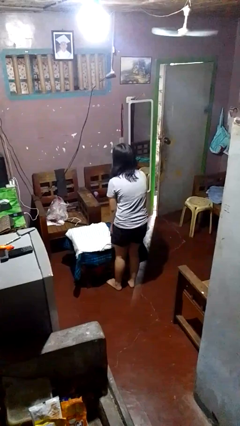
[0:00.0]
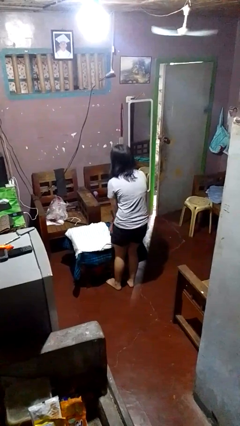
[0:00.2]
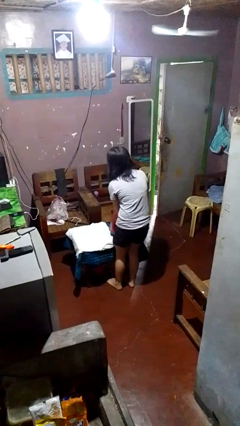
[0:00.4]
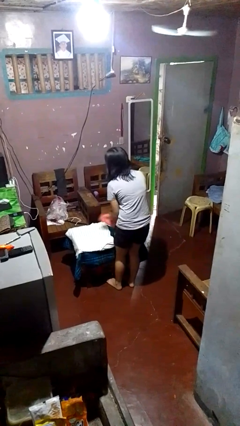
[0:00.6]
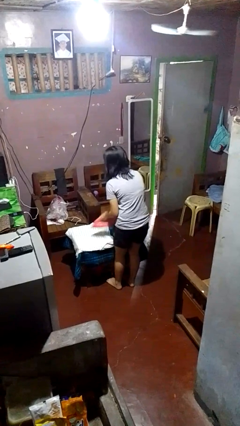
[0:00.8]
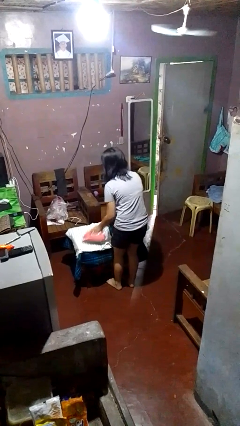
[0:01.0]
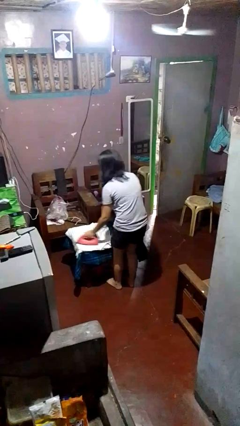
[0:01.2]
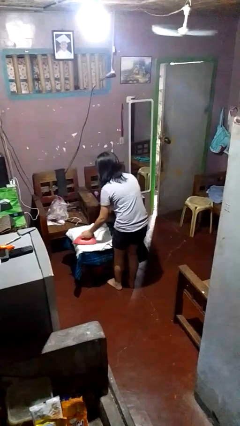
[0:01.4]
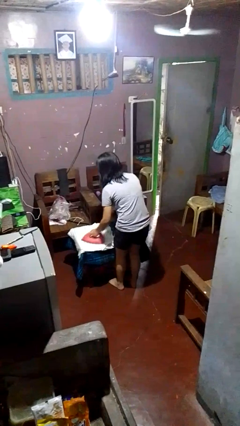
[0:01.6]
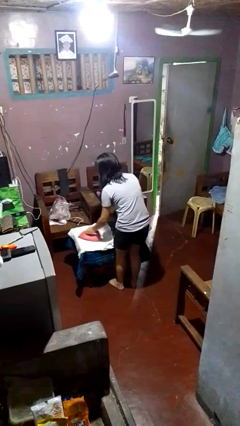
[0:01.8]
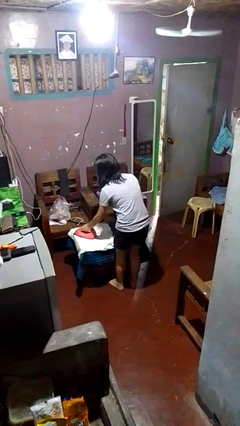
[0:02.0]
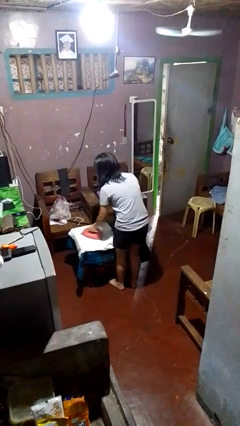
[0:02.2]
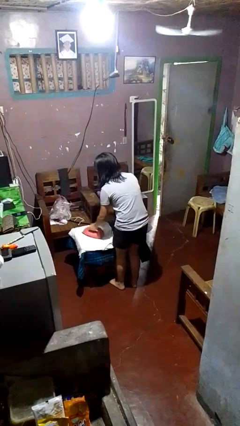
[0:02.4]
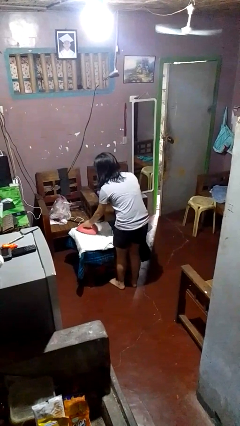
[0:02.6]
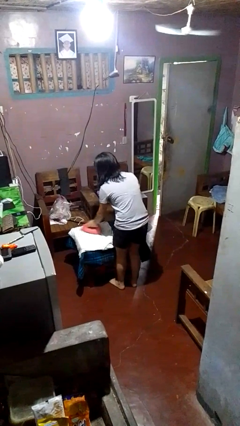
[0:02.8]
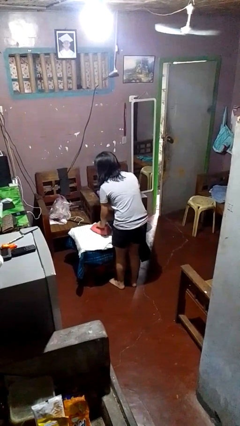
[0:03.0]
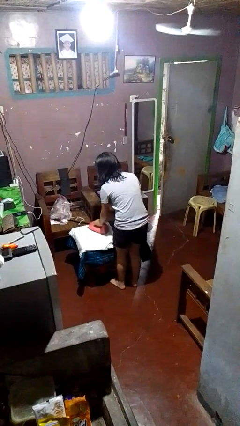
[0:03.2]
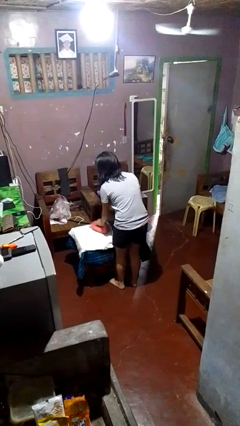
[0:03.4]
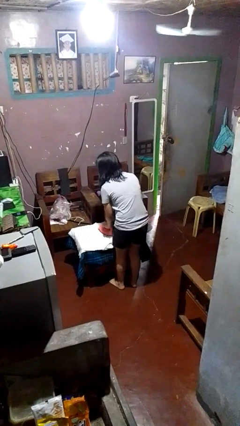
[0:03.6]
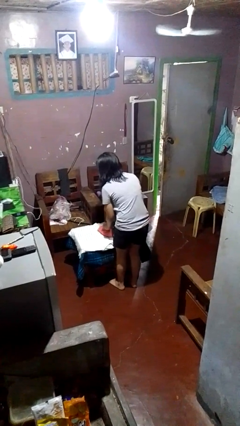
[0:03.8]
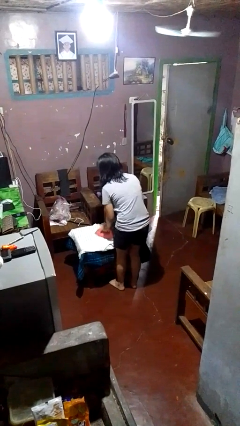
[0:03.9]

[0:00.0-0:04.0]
person irons clothes

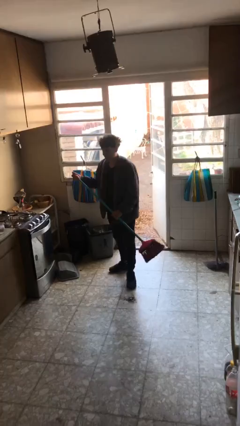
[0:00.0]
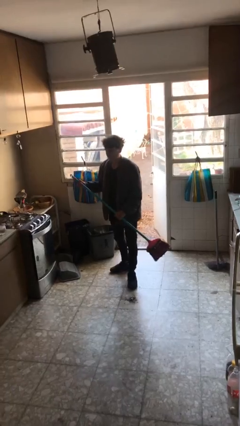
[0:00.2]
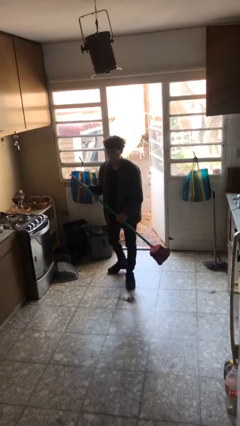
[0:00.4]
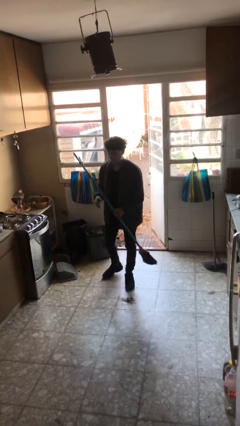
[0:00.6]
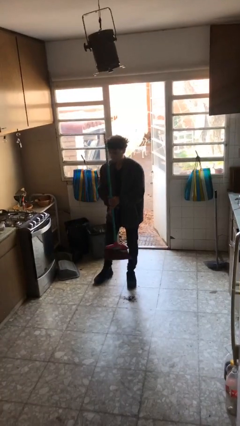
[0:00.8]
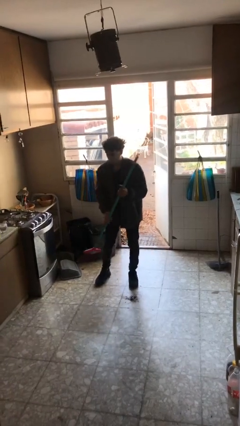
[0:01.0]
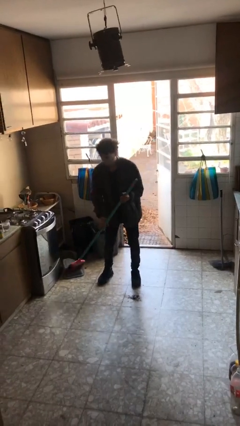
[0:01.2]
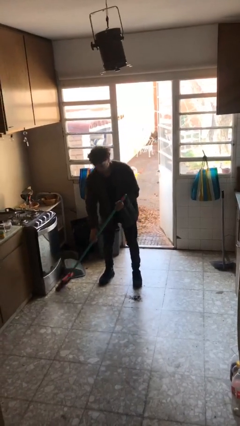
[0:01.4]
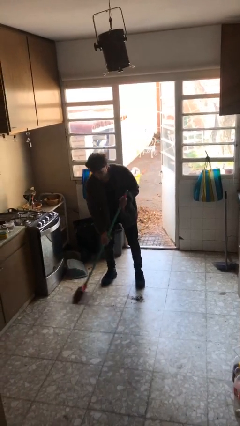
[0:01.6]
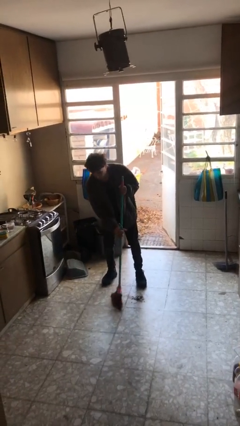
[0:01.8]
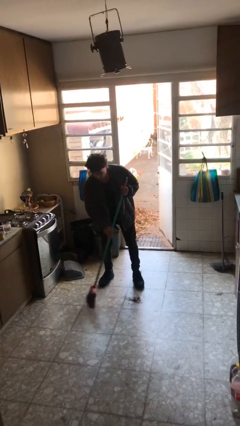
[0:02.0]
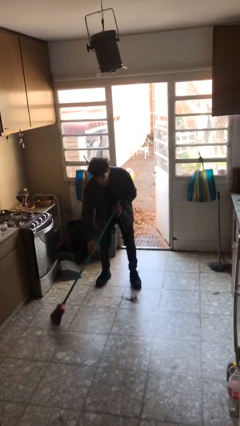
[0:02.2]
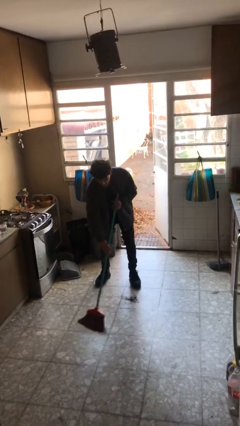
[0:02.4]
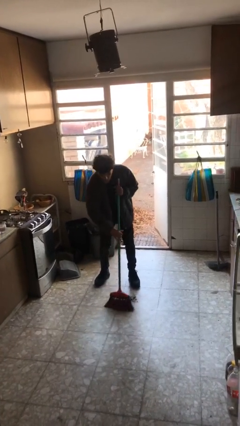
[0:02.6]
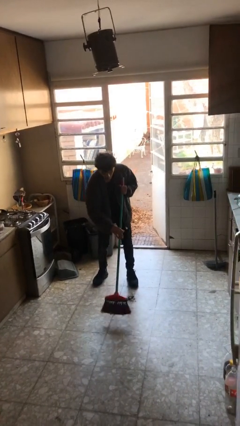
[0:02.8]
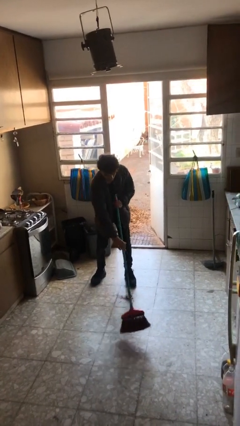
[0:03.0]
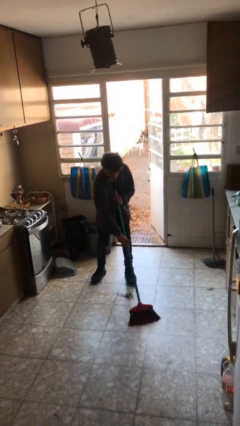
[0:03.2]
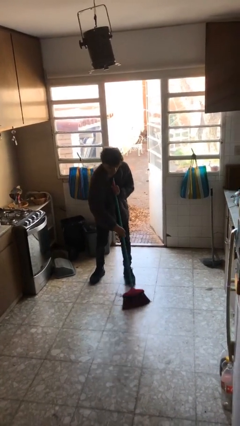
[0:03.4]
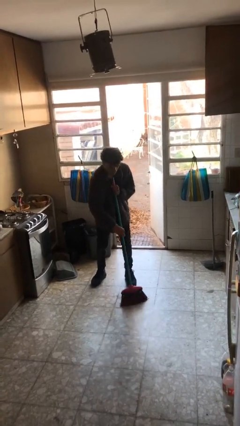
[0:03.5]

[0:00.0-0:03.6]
person sweeps floor

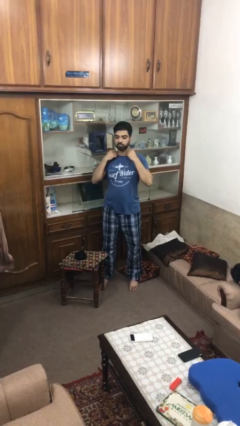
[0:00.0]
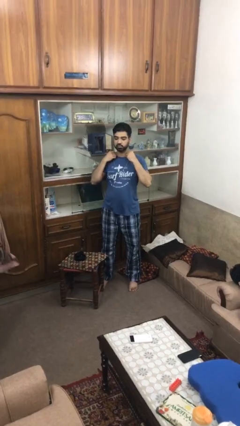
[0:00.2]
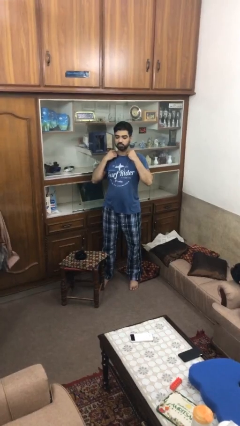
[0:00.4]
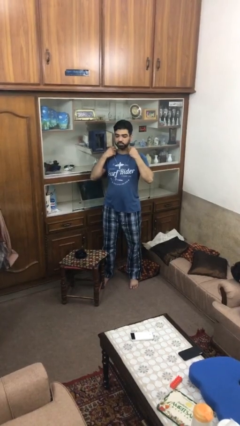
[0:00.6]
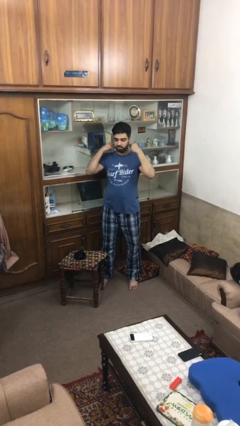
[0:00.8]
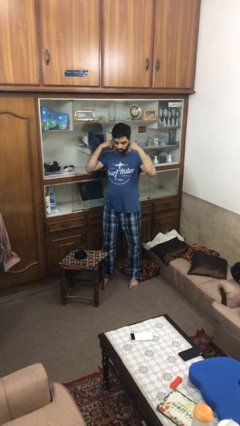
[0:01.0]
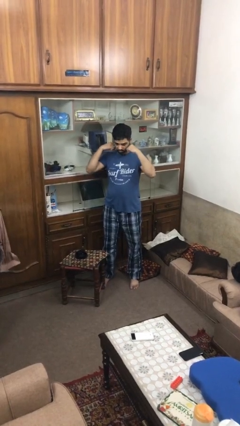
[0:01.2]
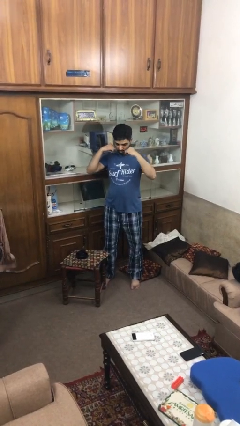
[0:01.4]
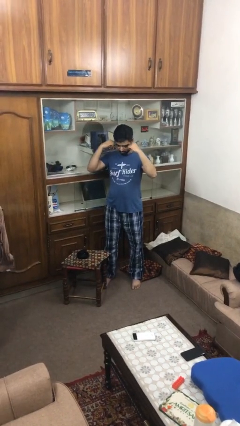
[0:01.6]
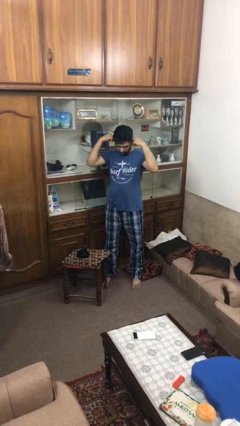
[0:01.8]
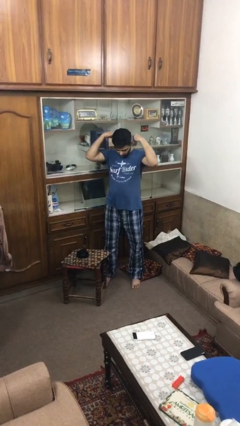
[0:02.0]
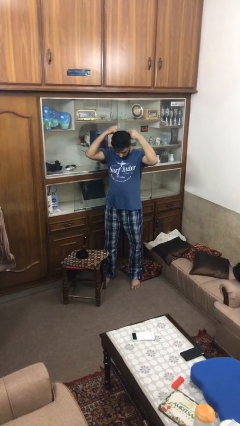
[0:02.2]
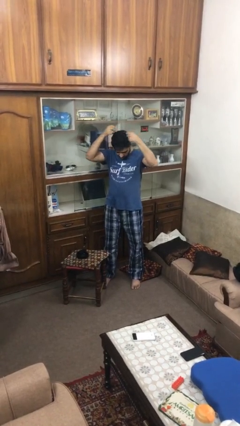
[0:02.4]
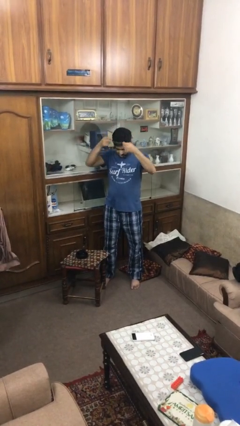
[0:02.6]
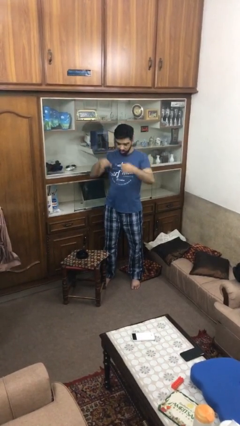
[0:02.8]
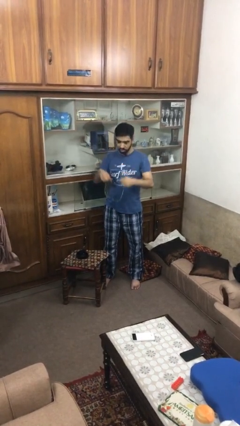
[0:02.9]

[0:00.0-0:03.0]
person takes off necklace

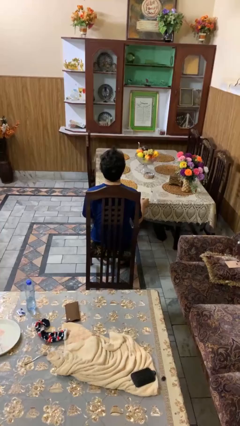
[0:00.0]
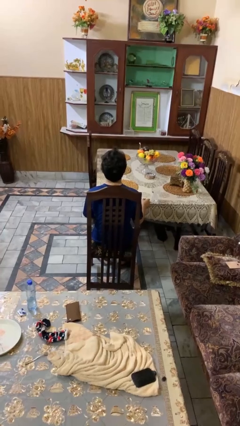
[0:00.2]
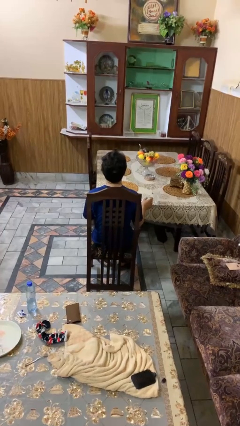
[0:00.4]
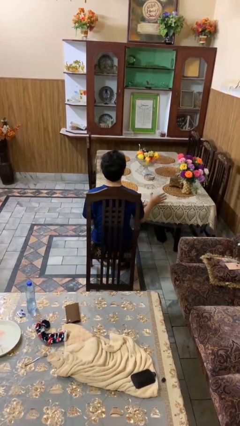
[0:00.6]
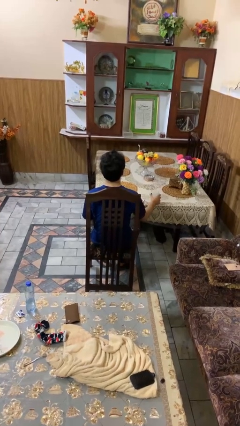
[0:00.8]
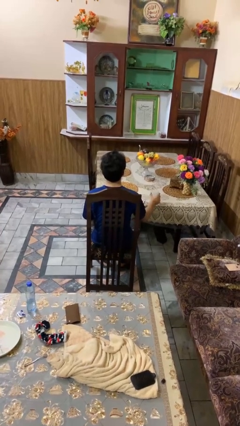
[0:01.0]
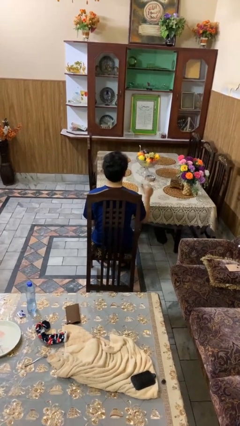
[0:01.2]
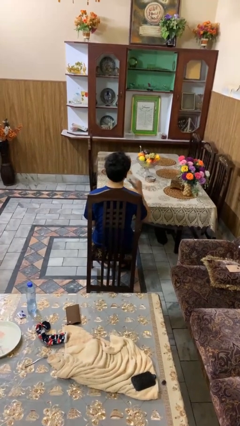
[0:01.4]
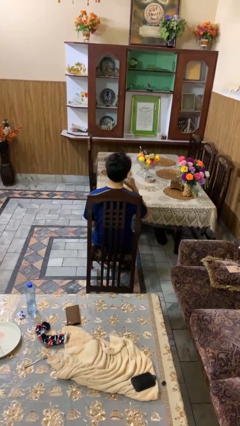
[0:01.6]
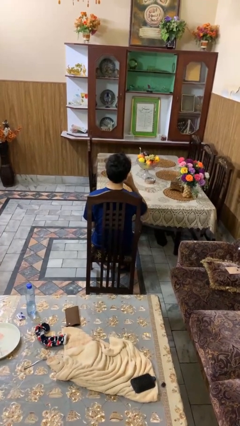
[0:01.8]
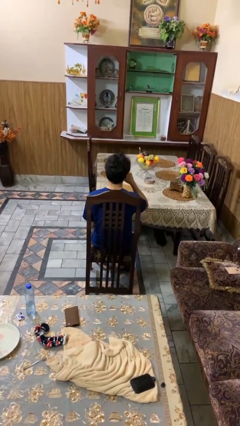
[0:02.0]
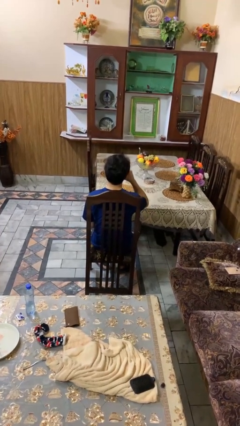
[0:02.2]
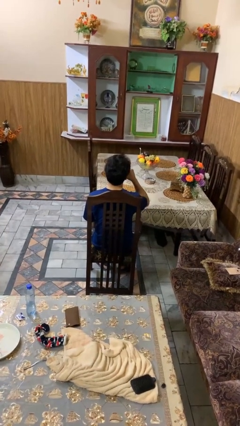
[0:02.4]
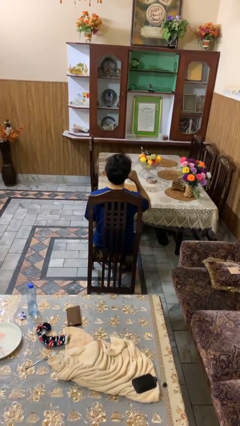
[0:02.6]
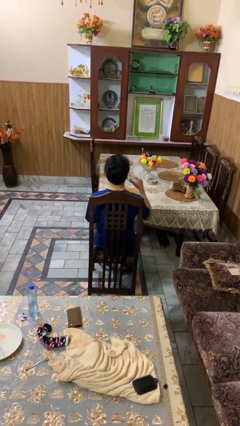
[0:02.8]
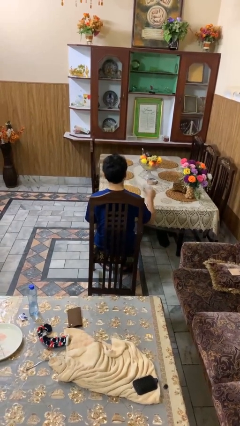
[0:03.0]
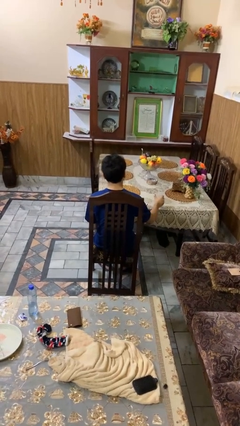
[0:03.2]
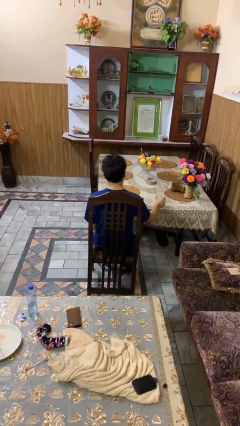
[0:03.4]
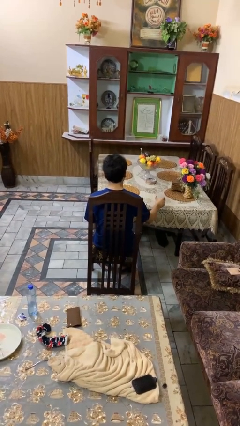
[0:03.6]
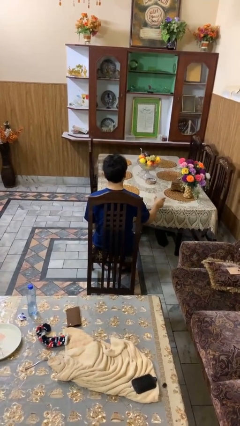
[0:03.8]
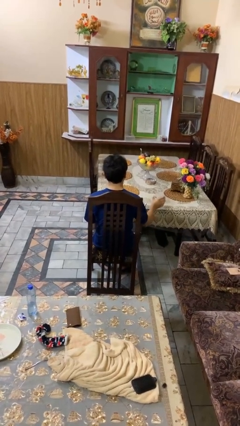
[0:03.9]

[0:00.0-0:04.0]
person drinks from cup

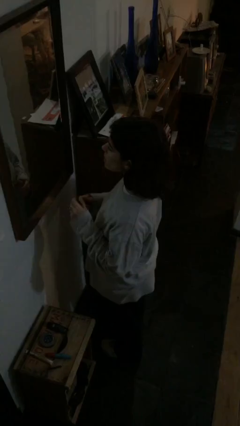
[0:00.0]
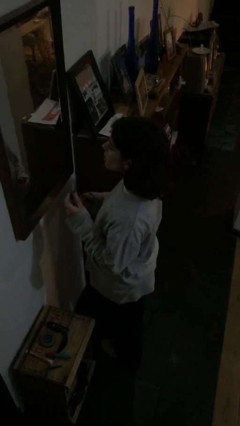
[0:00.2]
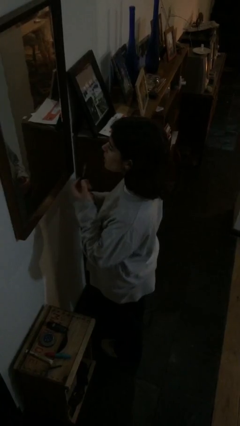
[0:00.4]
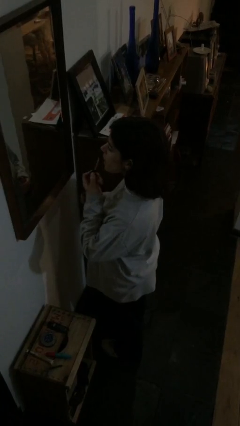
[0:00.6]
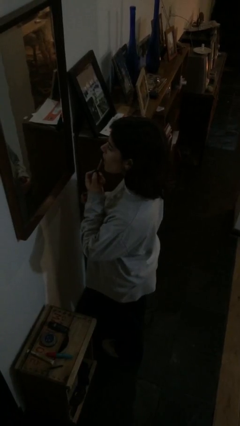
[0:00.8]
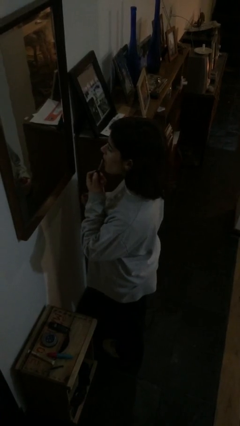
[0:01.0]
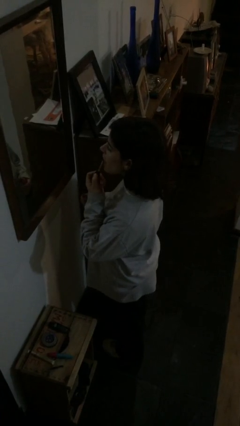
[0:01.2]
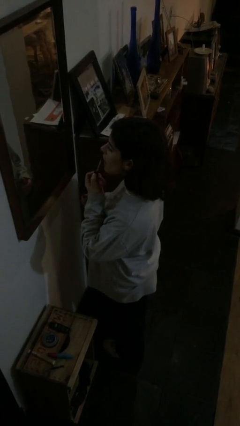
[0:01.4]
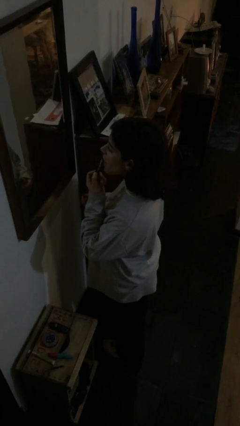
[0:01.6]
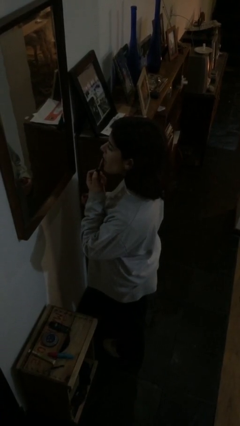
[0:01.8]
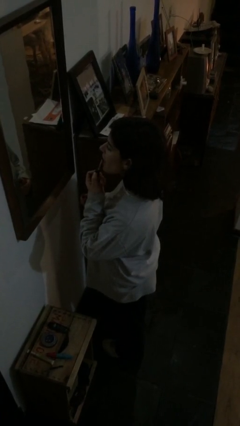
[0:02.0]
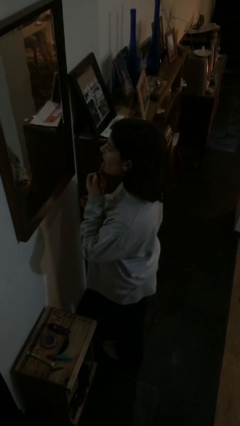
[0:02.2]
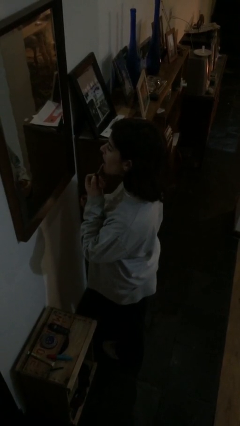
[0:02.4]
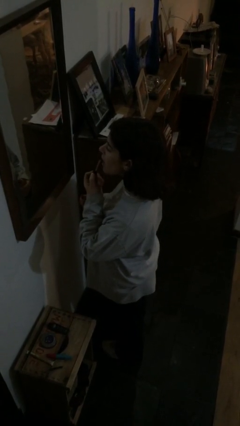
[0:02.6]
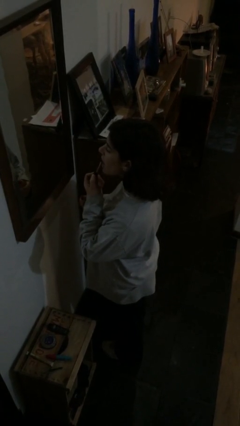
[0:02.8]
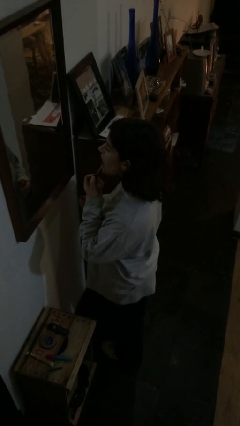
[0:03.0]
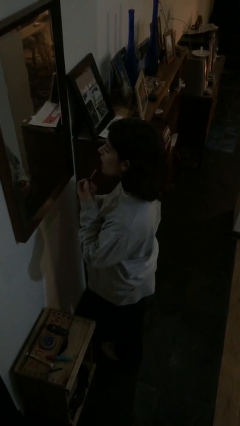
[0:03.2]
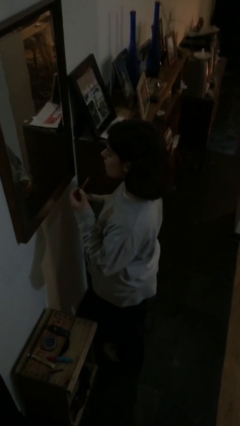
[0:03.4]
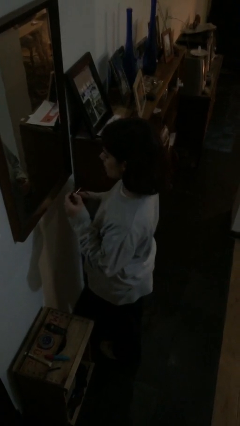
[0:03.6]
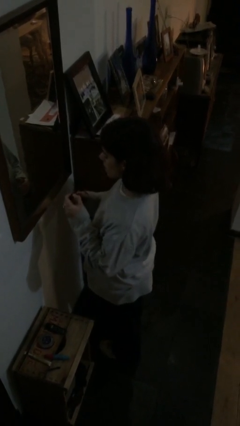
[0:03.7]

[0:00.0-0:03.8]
person applies lip makeup
